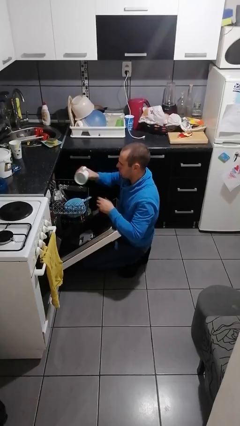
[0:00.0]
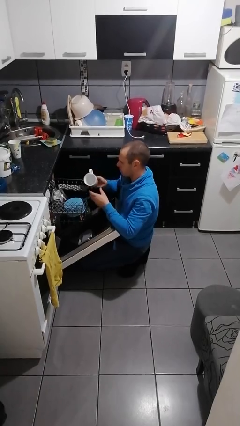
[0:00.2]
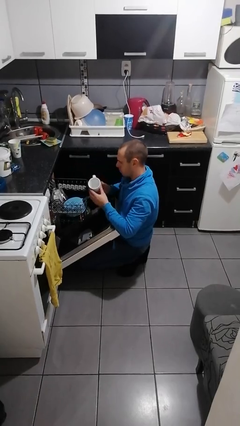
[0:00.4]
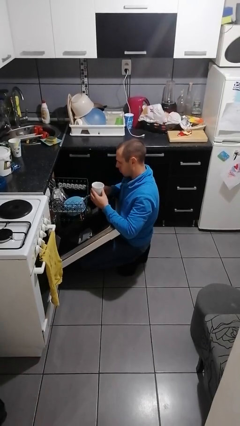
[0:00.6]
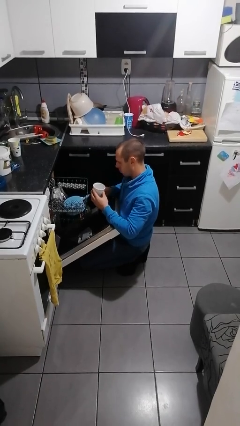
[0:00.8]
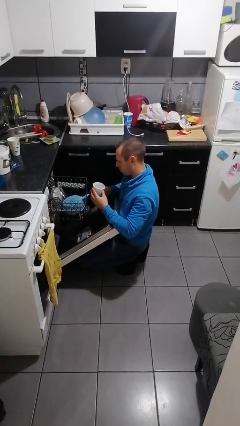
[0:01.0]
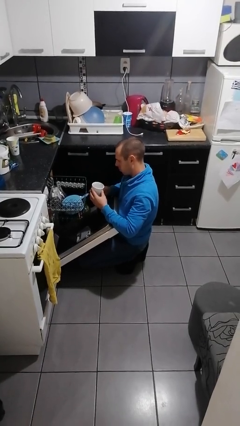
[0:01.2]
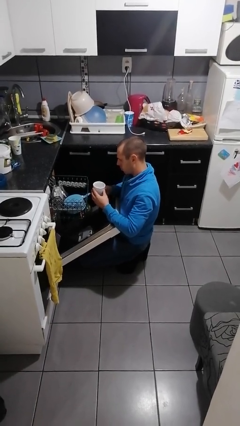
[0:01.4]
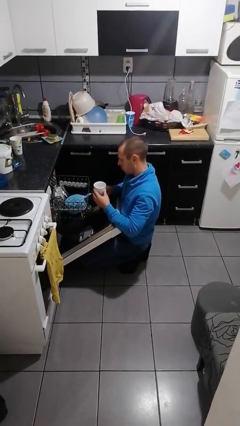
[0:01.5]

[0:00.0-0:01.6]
person unloads dishwasher

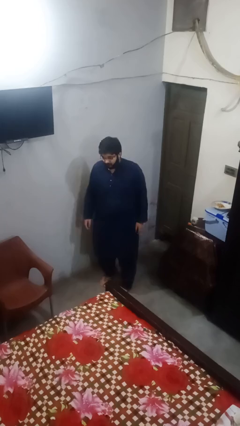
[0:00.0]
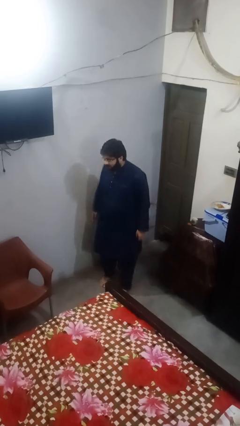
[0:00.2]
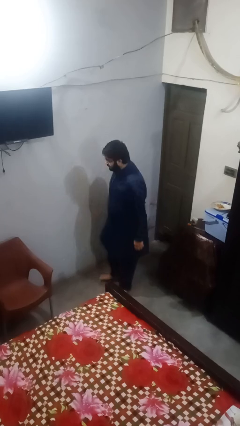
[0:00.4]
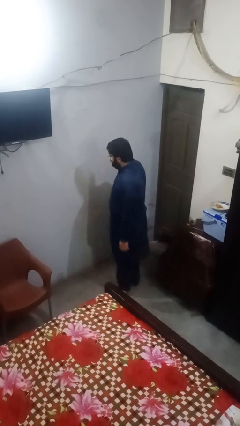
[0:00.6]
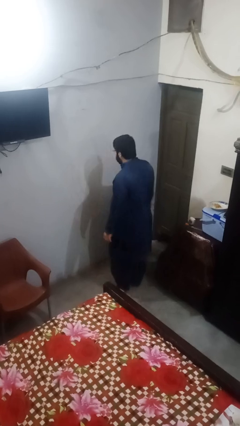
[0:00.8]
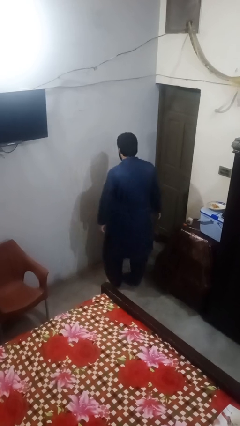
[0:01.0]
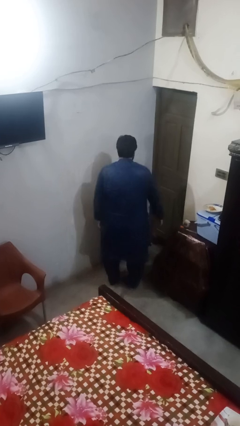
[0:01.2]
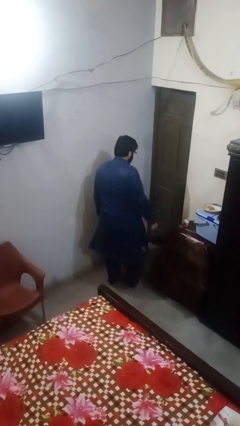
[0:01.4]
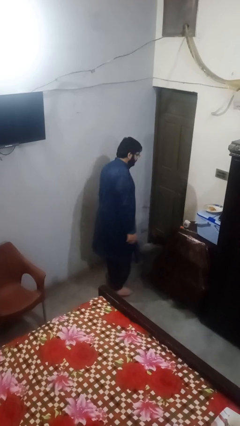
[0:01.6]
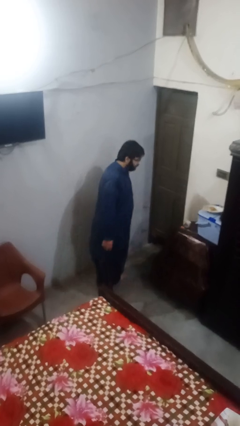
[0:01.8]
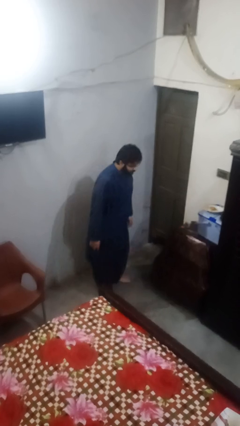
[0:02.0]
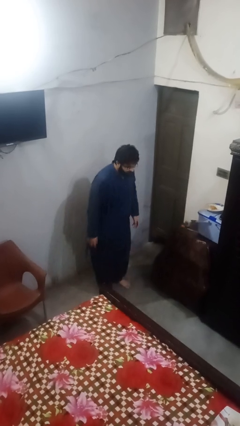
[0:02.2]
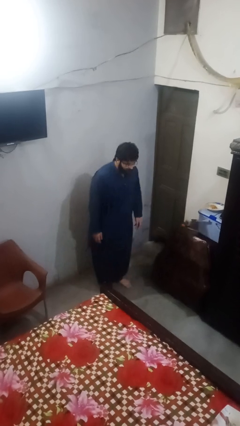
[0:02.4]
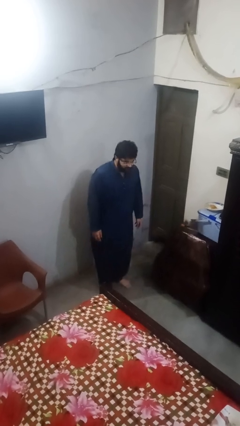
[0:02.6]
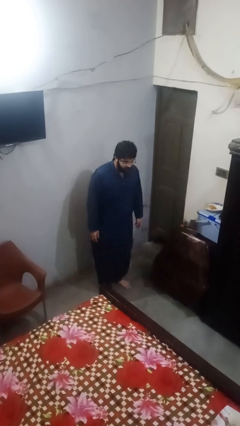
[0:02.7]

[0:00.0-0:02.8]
person twirls

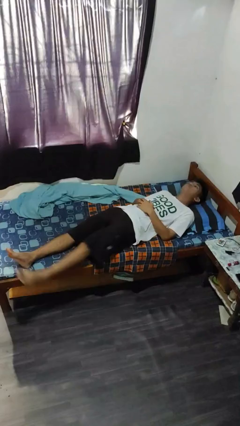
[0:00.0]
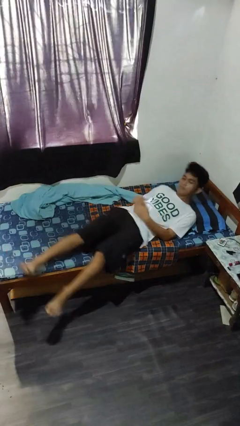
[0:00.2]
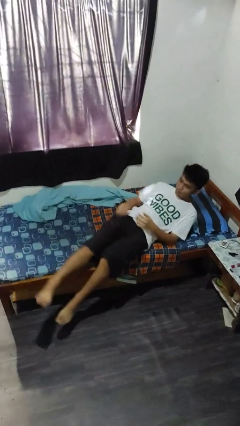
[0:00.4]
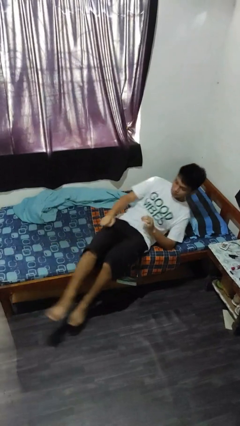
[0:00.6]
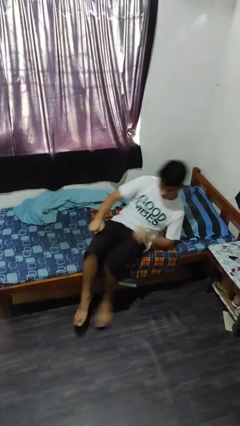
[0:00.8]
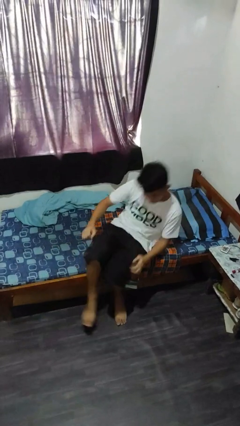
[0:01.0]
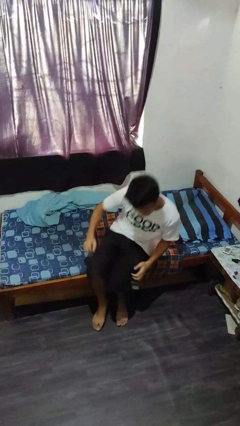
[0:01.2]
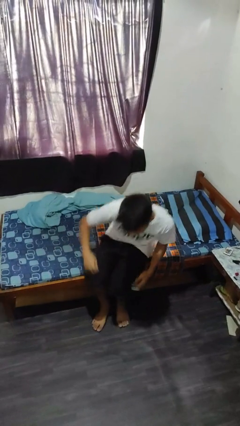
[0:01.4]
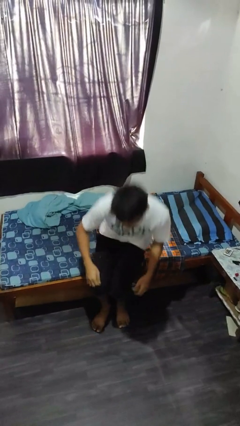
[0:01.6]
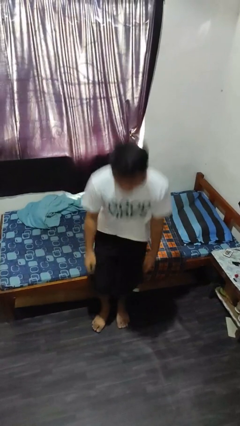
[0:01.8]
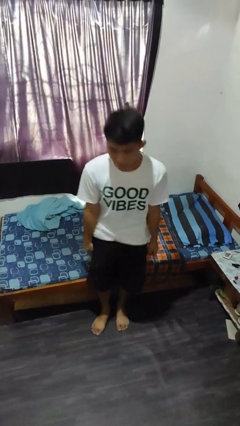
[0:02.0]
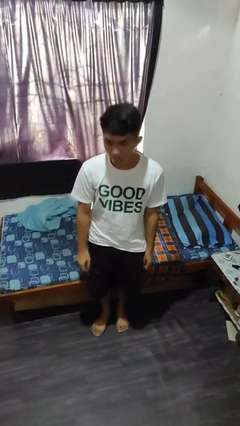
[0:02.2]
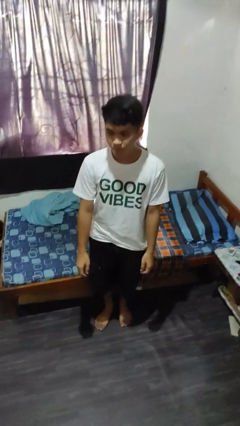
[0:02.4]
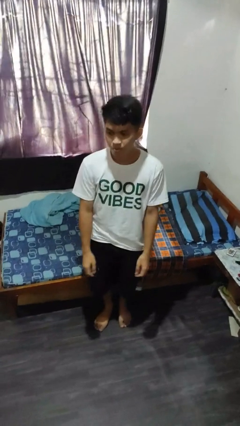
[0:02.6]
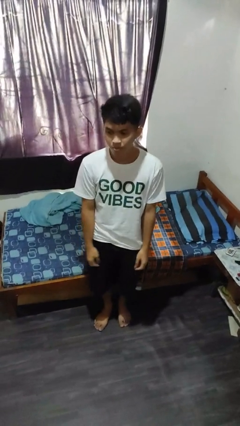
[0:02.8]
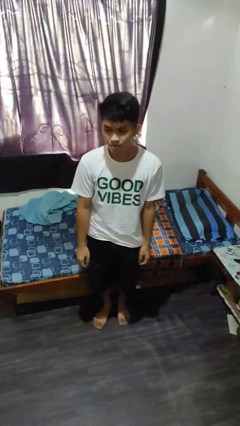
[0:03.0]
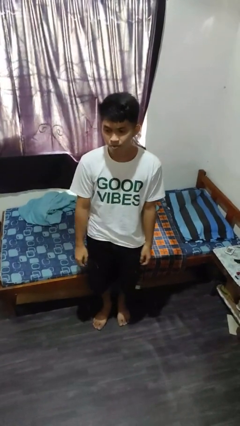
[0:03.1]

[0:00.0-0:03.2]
person stands up

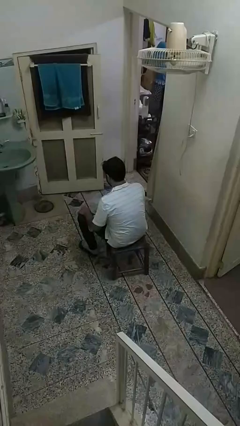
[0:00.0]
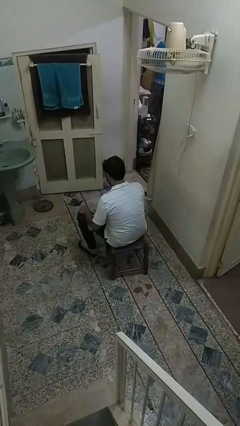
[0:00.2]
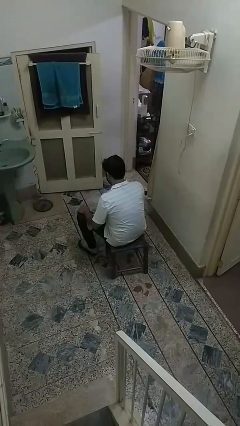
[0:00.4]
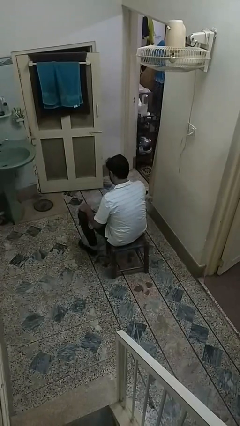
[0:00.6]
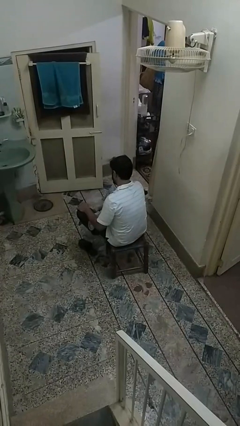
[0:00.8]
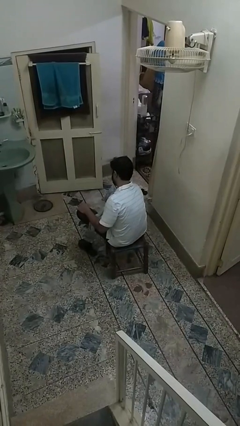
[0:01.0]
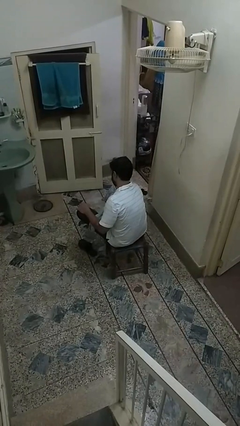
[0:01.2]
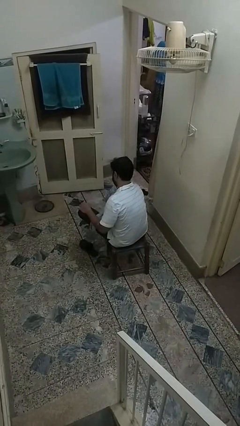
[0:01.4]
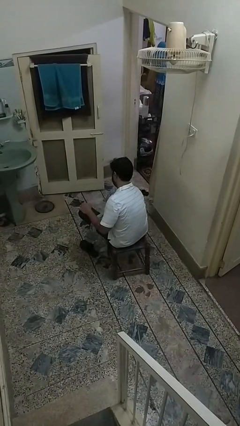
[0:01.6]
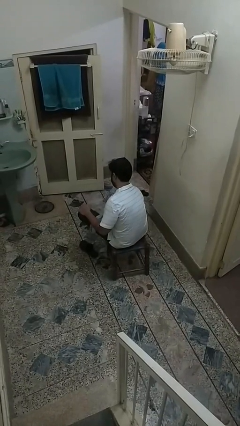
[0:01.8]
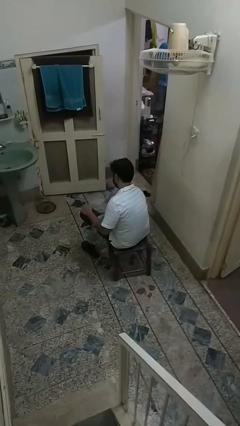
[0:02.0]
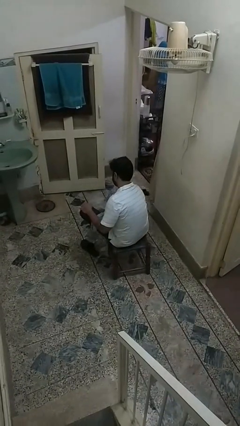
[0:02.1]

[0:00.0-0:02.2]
person takes off socks

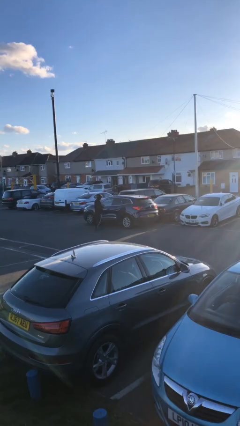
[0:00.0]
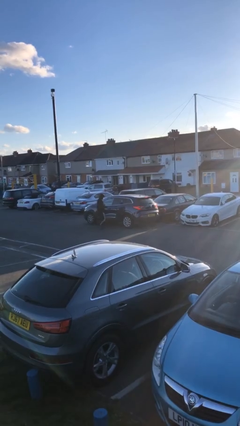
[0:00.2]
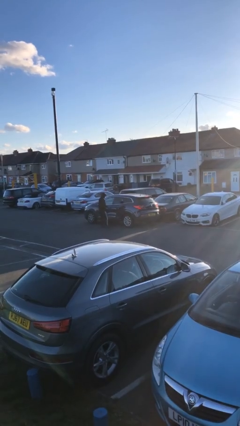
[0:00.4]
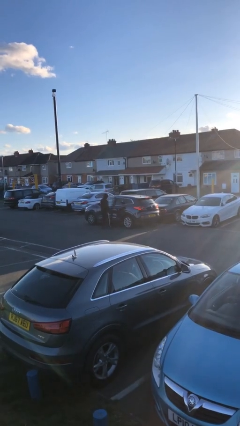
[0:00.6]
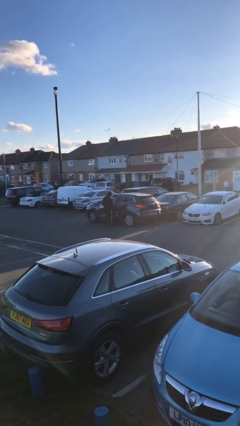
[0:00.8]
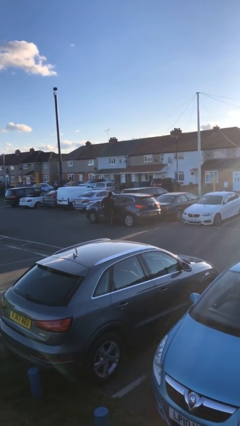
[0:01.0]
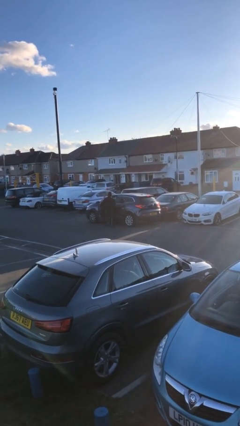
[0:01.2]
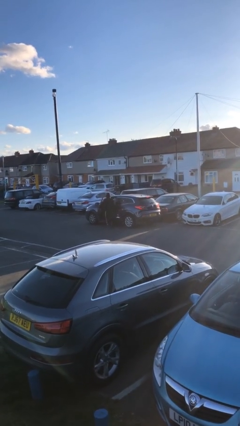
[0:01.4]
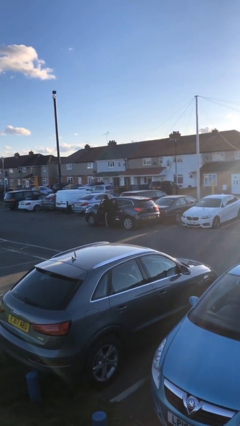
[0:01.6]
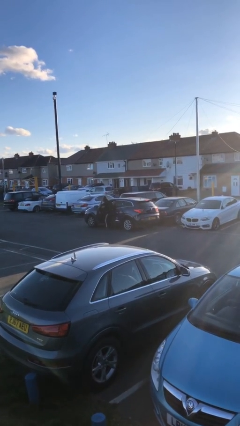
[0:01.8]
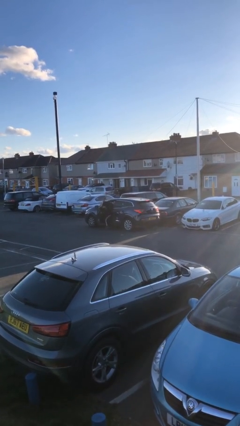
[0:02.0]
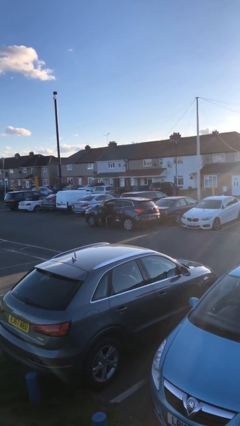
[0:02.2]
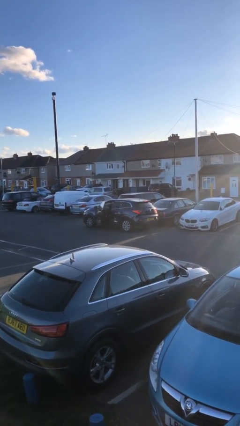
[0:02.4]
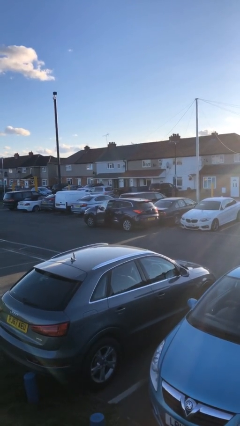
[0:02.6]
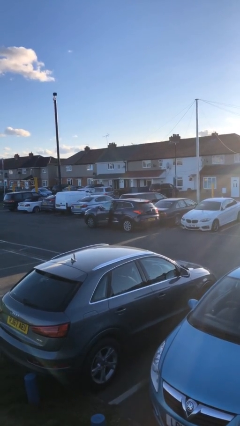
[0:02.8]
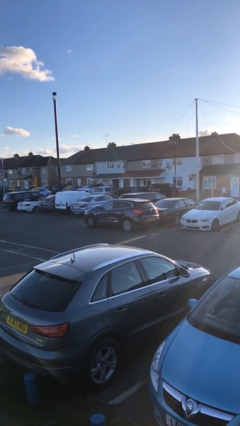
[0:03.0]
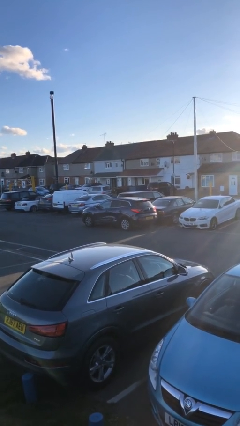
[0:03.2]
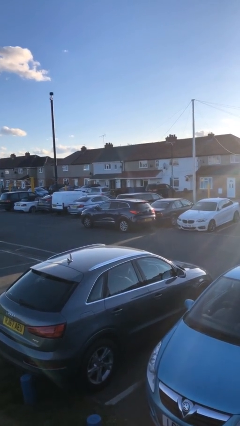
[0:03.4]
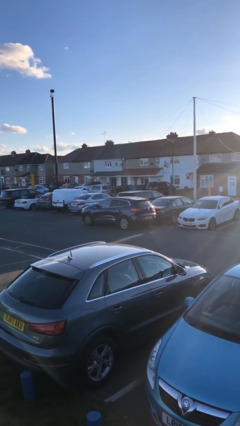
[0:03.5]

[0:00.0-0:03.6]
car picks up person

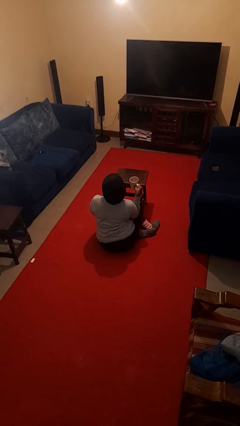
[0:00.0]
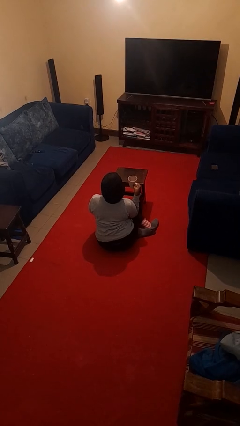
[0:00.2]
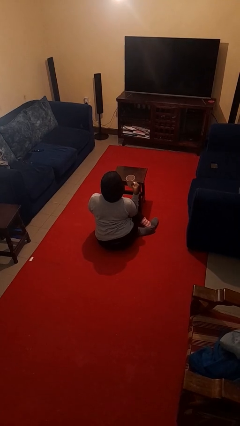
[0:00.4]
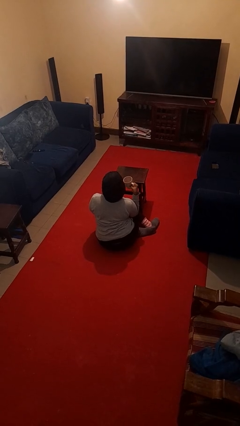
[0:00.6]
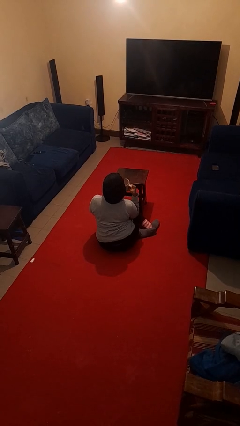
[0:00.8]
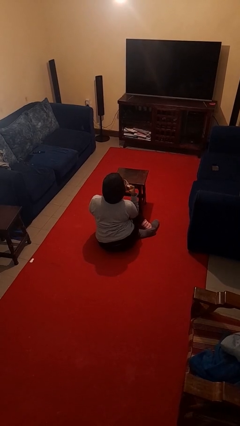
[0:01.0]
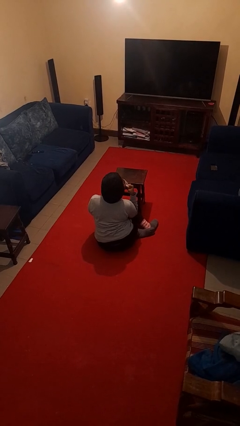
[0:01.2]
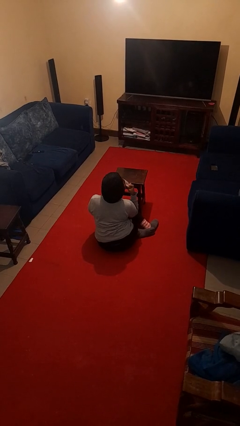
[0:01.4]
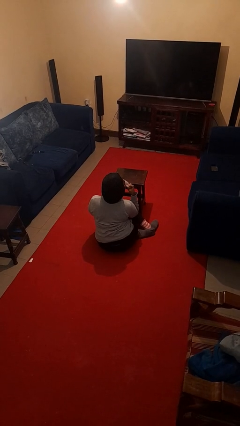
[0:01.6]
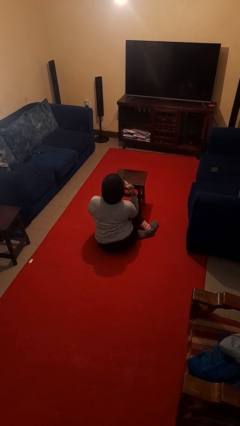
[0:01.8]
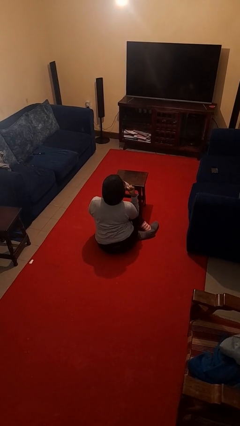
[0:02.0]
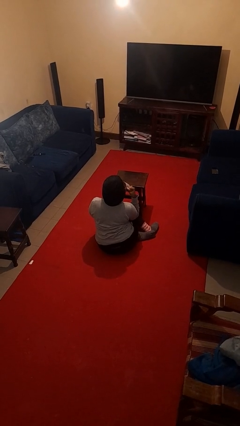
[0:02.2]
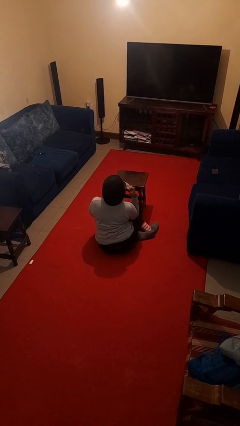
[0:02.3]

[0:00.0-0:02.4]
person drinks from mug

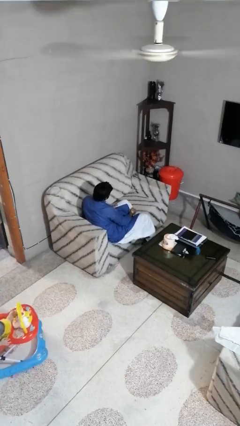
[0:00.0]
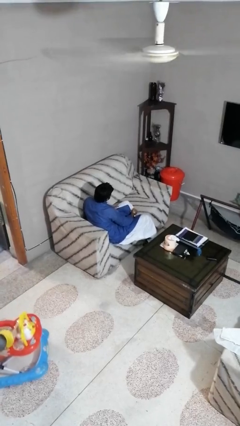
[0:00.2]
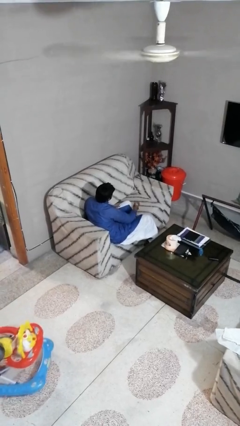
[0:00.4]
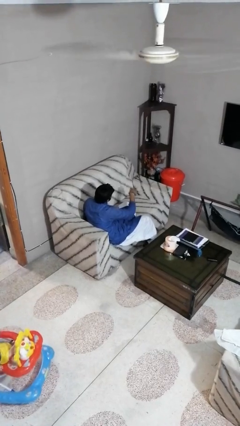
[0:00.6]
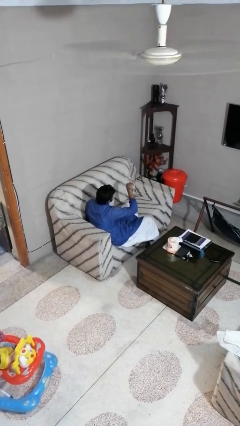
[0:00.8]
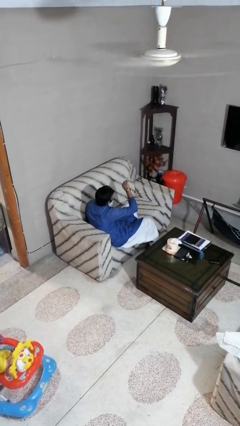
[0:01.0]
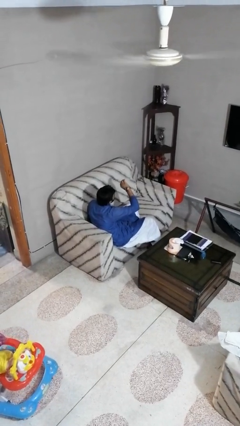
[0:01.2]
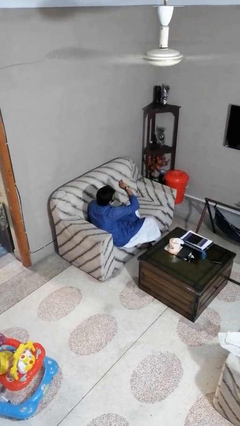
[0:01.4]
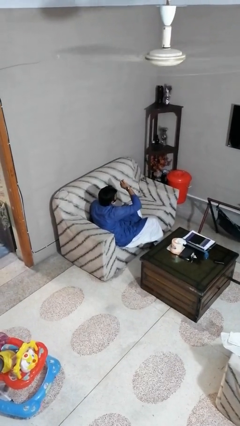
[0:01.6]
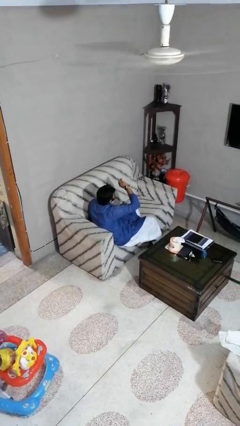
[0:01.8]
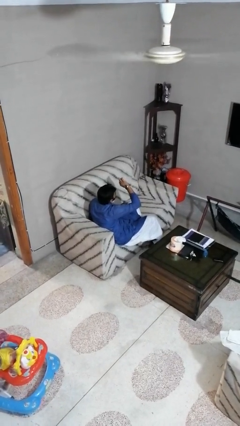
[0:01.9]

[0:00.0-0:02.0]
person looks at wristwatch
